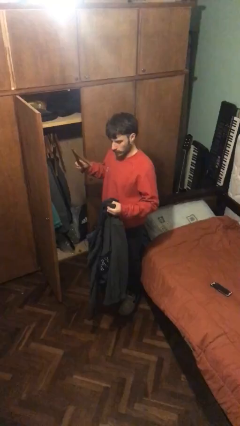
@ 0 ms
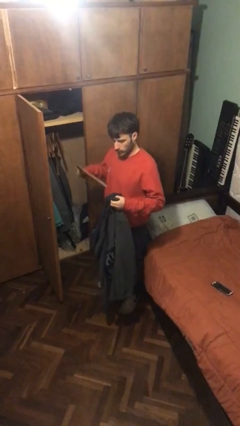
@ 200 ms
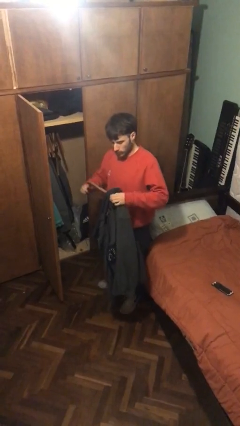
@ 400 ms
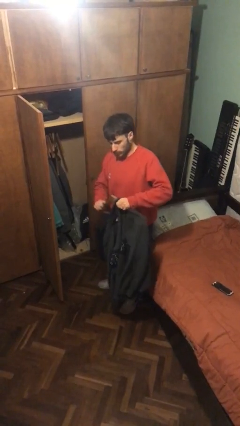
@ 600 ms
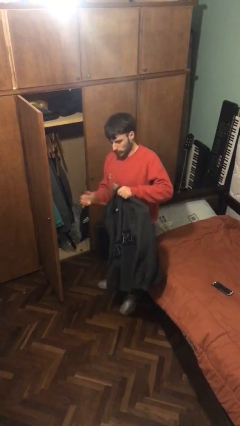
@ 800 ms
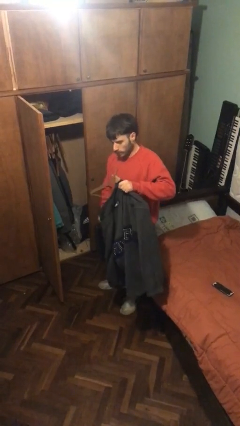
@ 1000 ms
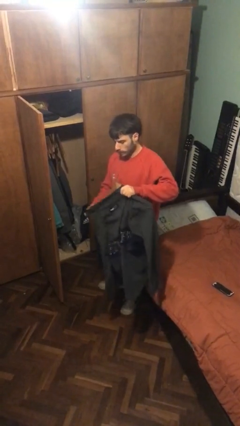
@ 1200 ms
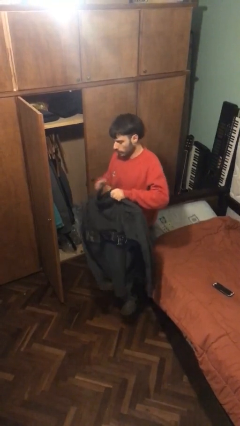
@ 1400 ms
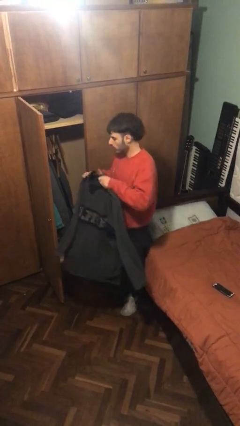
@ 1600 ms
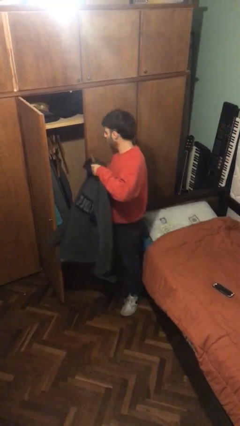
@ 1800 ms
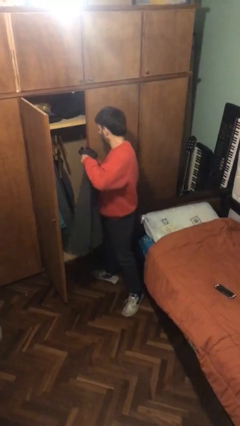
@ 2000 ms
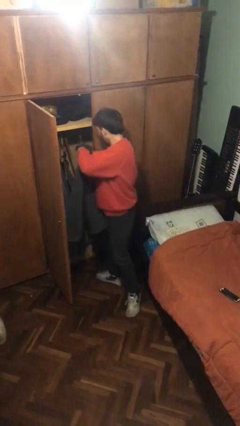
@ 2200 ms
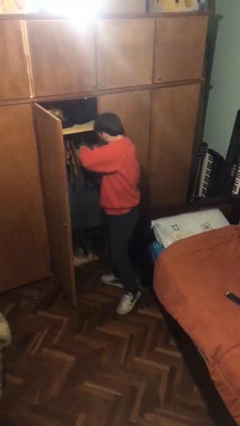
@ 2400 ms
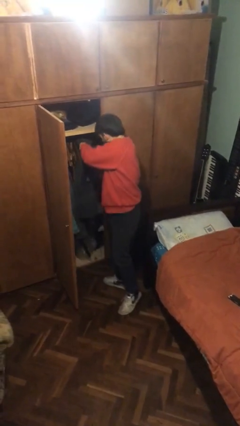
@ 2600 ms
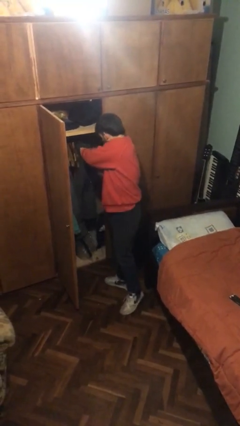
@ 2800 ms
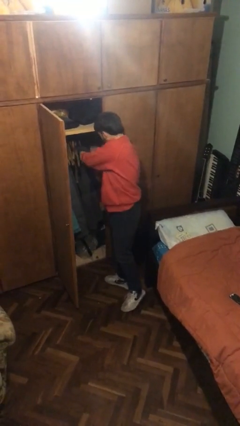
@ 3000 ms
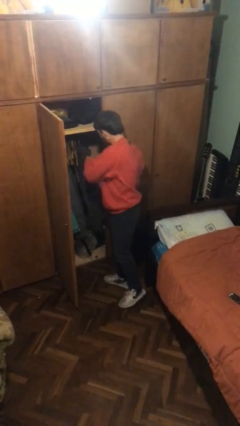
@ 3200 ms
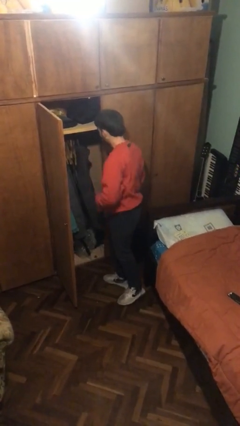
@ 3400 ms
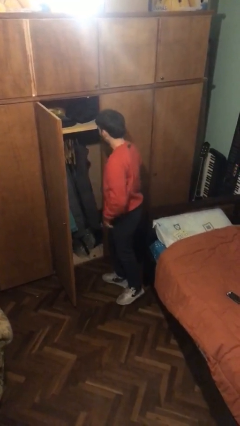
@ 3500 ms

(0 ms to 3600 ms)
person puts clothes into closet

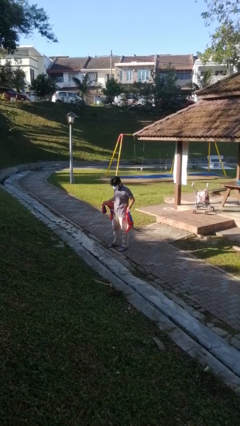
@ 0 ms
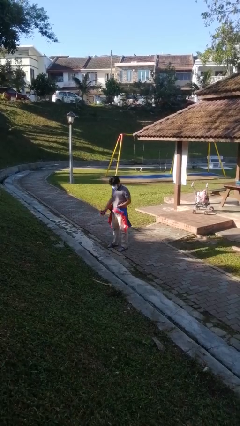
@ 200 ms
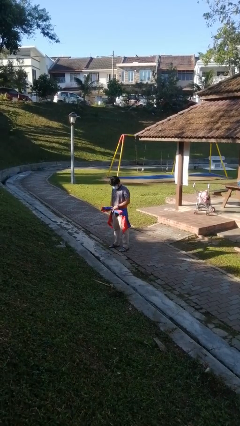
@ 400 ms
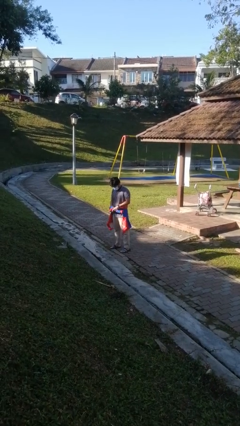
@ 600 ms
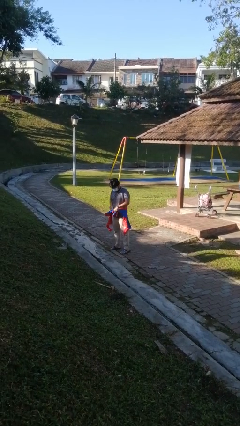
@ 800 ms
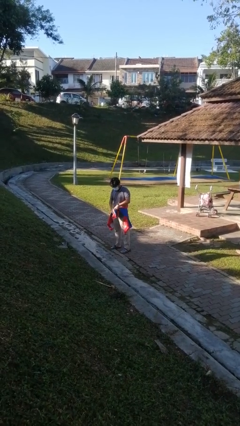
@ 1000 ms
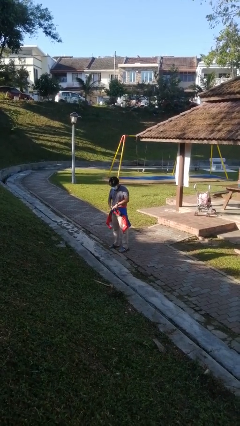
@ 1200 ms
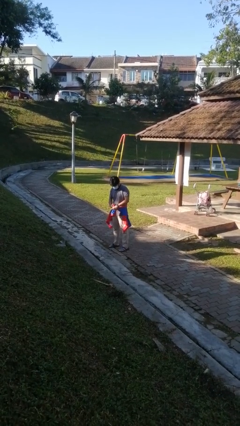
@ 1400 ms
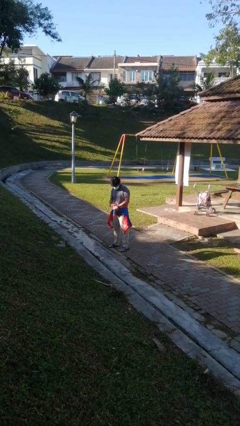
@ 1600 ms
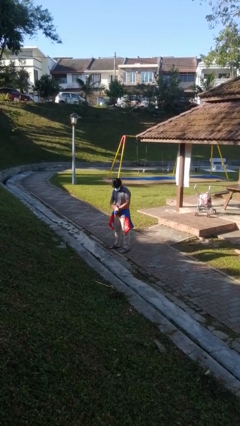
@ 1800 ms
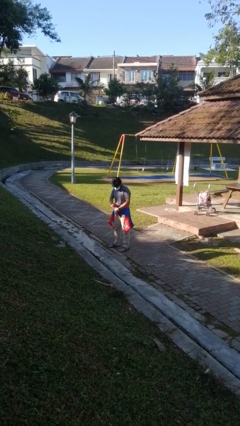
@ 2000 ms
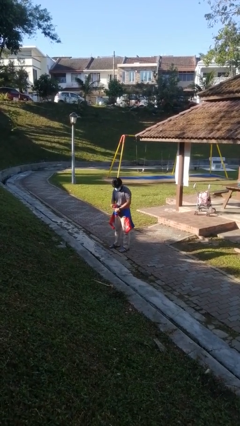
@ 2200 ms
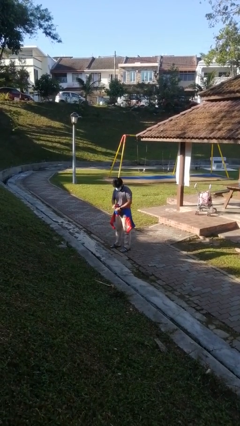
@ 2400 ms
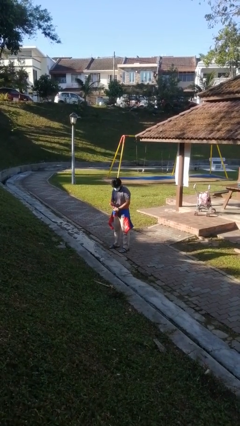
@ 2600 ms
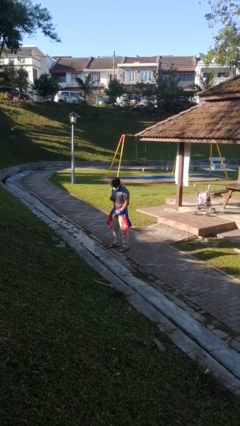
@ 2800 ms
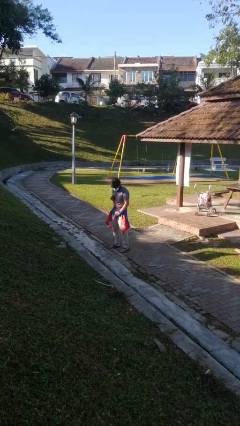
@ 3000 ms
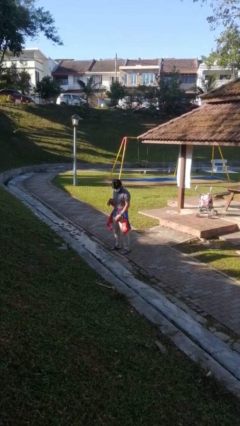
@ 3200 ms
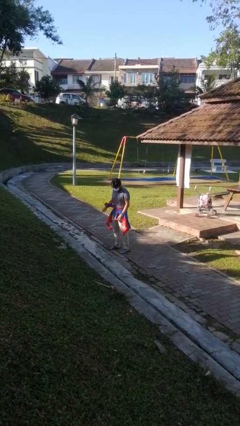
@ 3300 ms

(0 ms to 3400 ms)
person ties jacket around waist

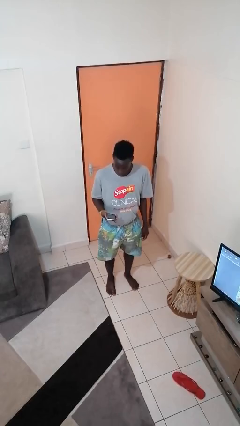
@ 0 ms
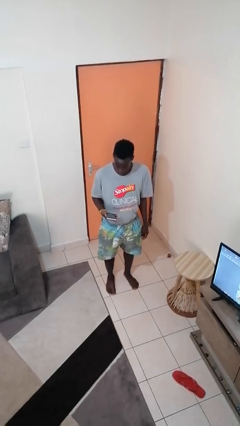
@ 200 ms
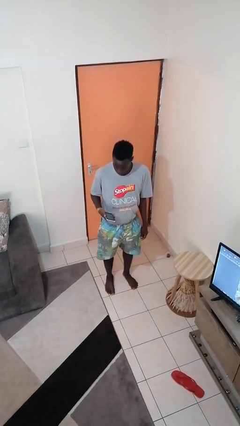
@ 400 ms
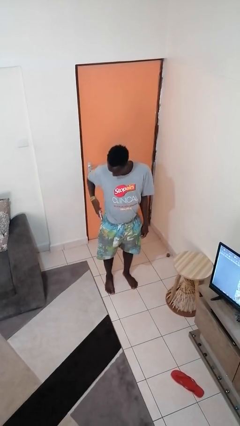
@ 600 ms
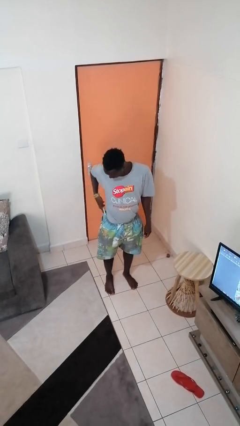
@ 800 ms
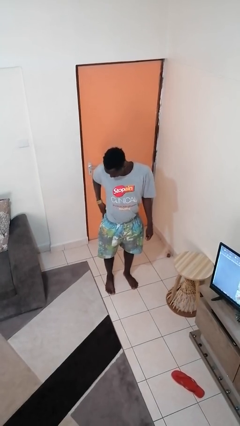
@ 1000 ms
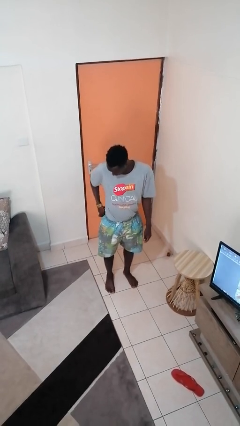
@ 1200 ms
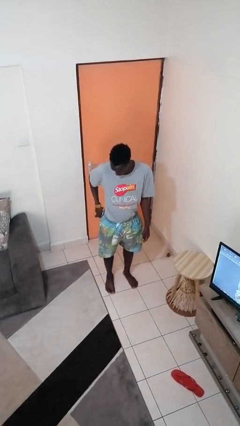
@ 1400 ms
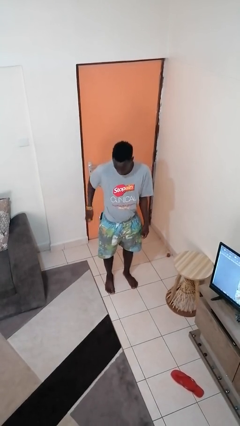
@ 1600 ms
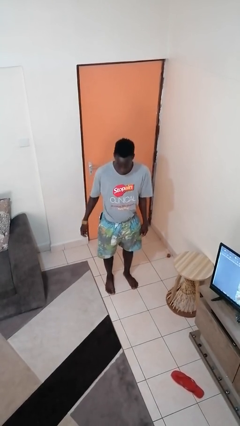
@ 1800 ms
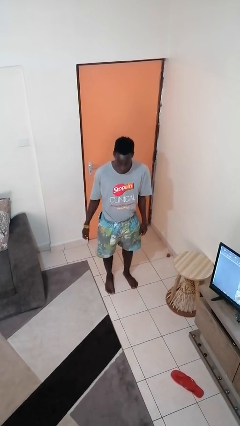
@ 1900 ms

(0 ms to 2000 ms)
person puts phone into pocket

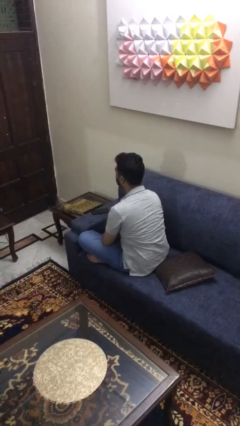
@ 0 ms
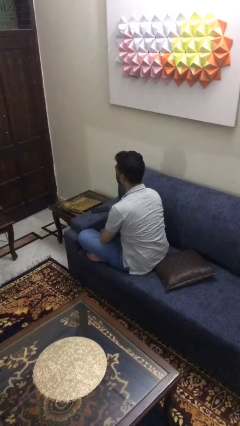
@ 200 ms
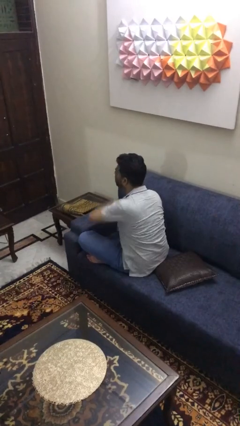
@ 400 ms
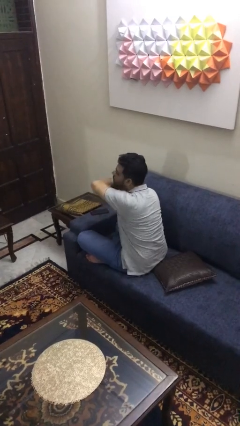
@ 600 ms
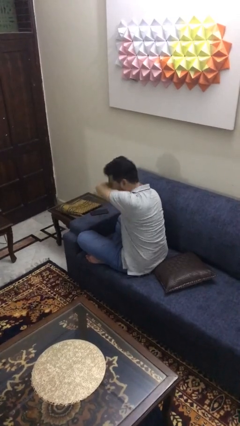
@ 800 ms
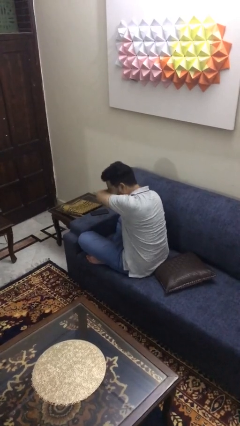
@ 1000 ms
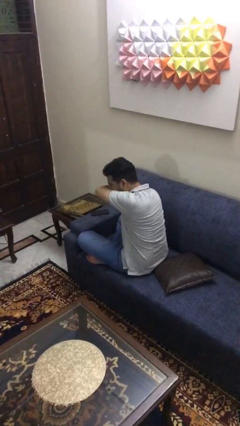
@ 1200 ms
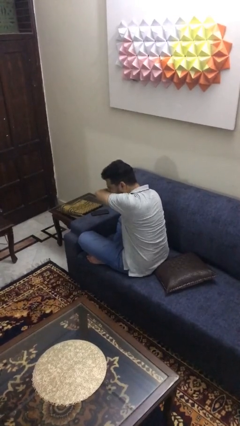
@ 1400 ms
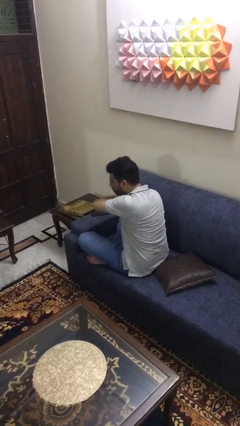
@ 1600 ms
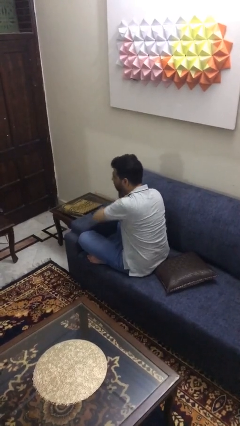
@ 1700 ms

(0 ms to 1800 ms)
person sneezes into arm

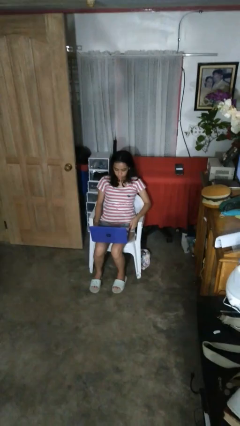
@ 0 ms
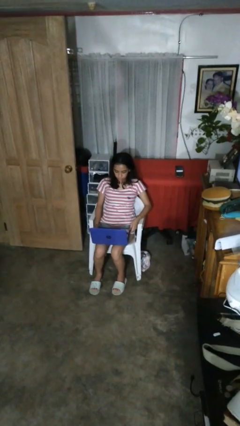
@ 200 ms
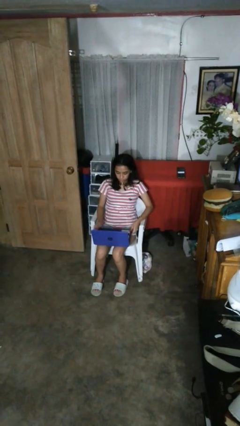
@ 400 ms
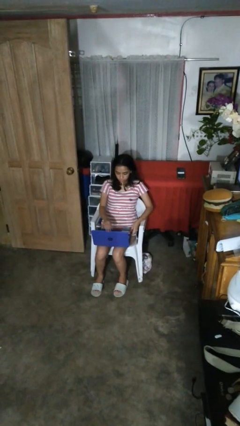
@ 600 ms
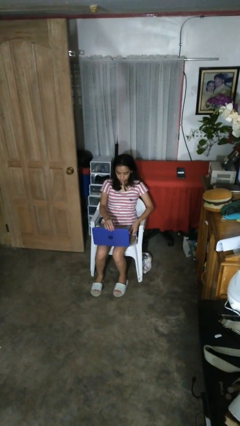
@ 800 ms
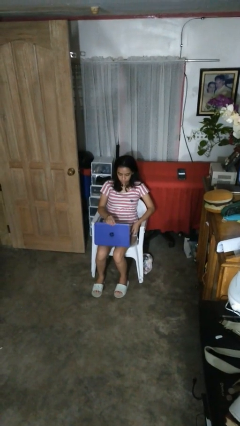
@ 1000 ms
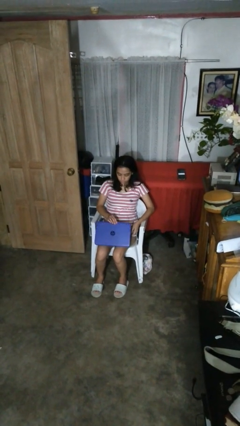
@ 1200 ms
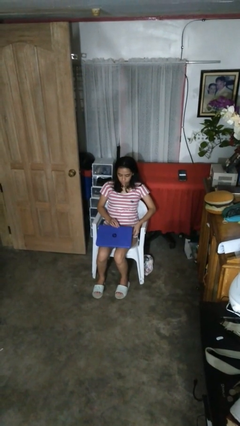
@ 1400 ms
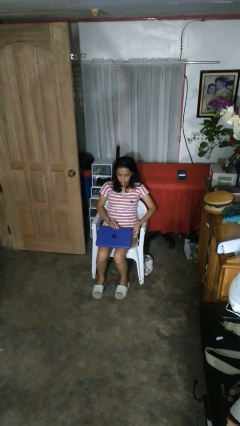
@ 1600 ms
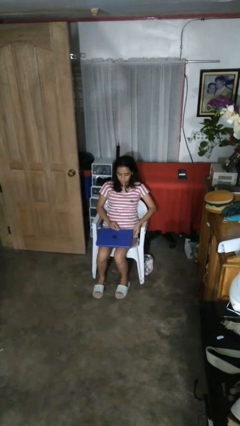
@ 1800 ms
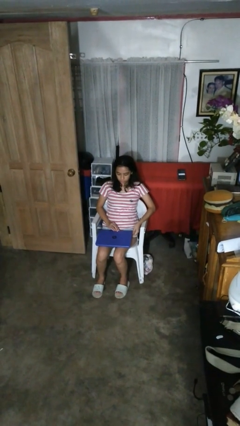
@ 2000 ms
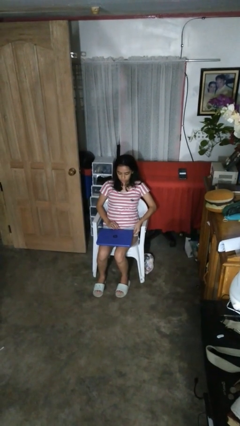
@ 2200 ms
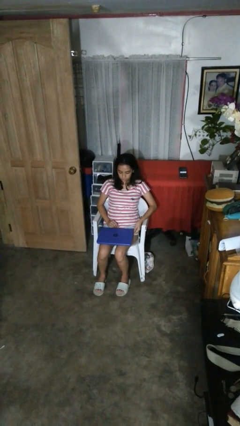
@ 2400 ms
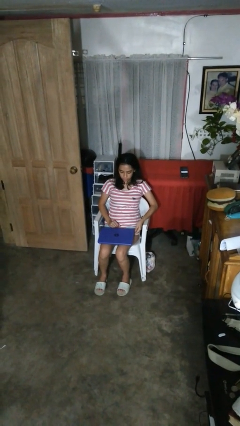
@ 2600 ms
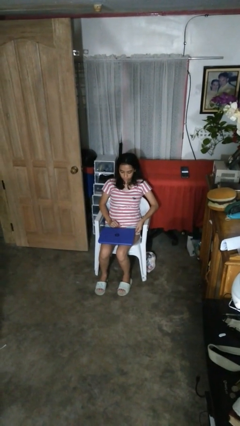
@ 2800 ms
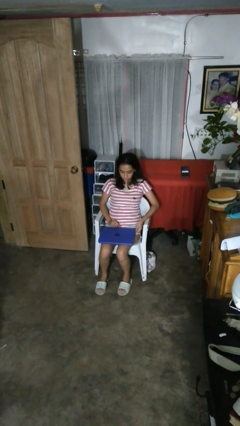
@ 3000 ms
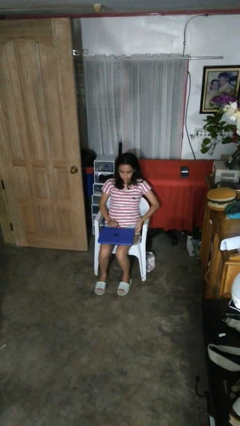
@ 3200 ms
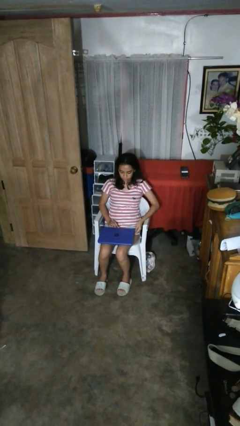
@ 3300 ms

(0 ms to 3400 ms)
person closes laptop

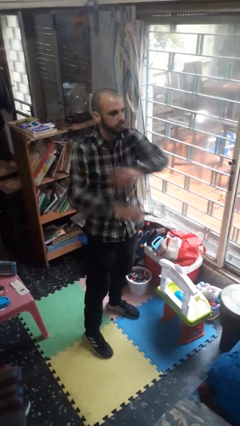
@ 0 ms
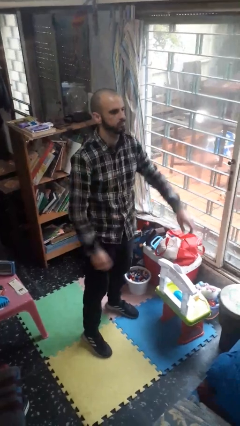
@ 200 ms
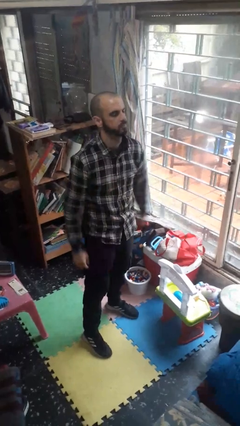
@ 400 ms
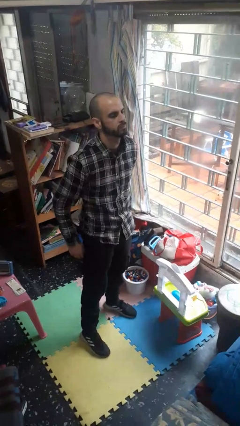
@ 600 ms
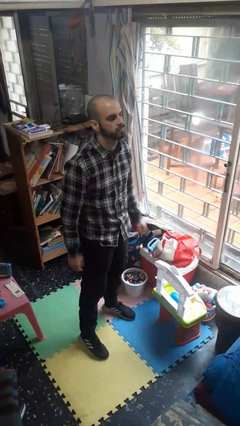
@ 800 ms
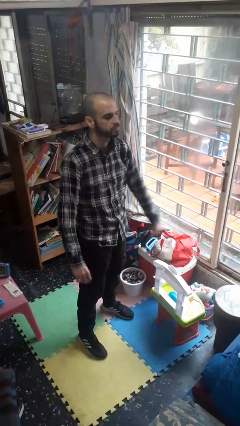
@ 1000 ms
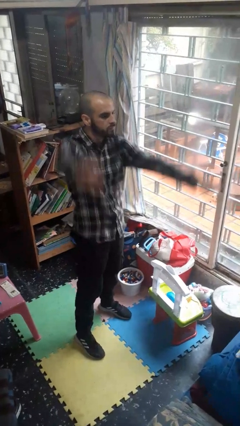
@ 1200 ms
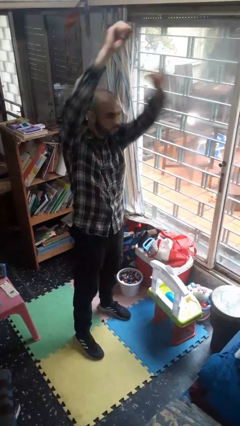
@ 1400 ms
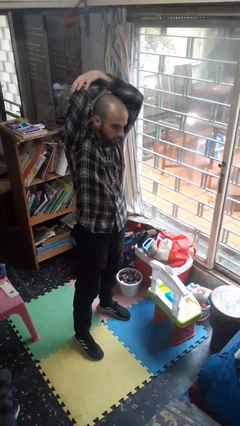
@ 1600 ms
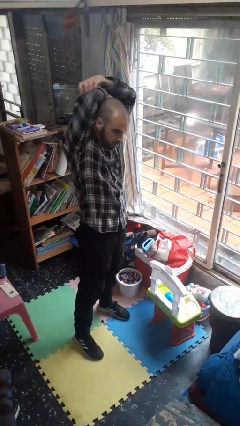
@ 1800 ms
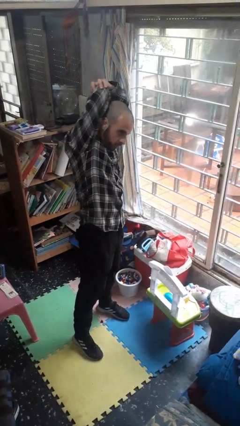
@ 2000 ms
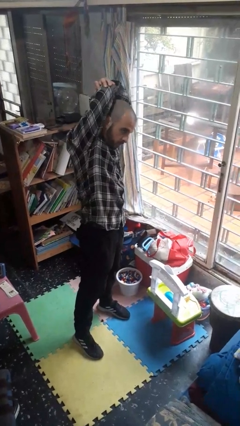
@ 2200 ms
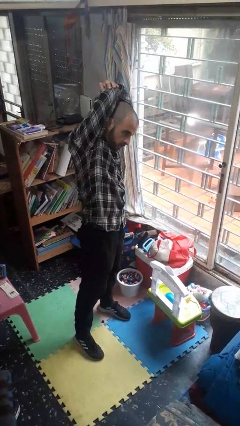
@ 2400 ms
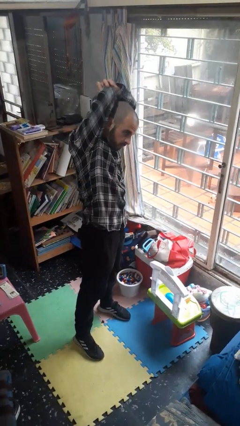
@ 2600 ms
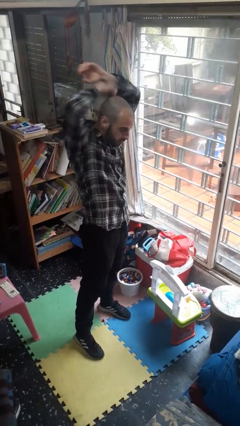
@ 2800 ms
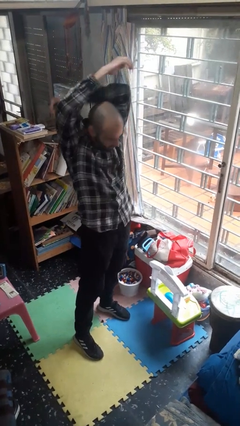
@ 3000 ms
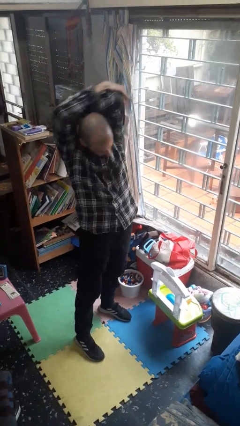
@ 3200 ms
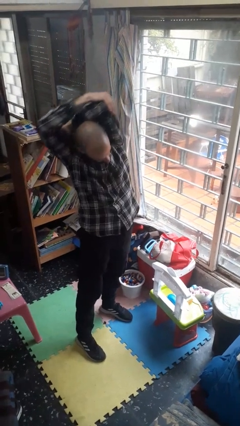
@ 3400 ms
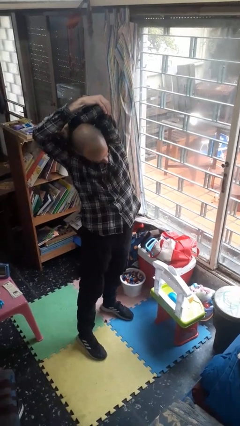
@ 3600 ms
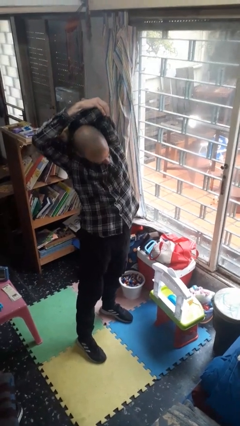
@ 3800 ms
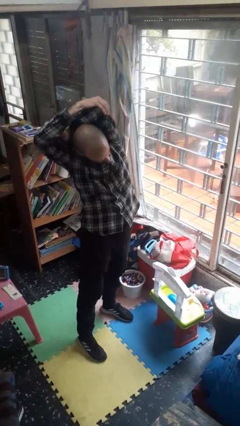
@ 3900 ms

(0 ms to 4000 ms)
person stretches arms over head
